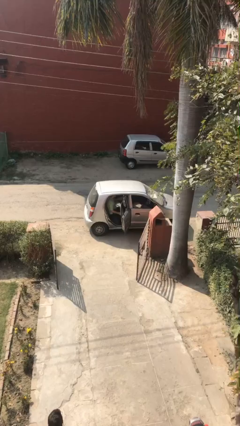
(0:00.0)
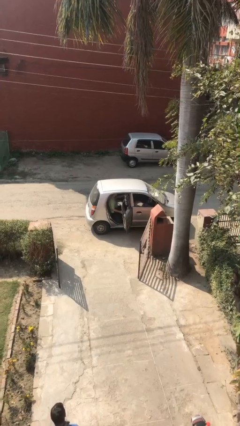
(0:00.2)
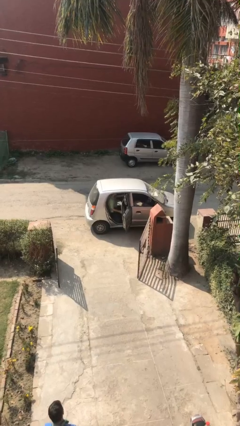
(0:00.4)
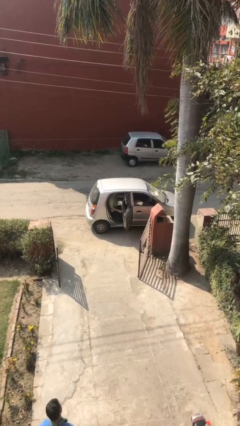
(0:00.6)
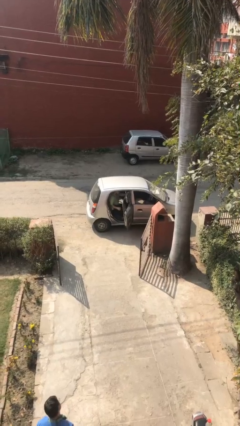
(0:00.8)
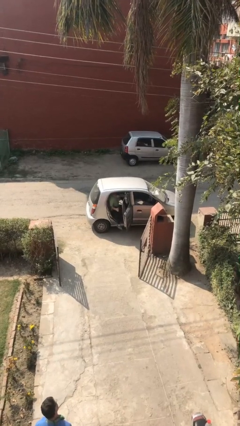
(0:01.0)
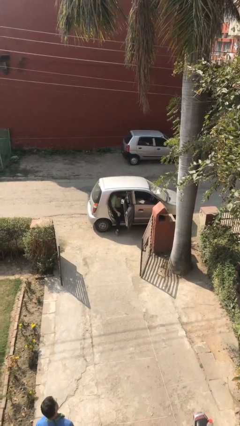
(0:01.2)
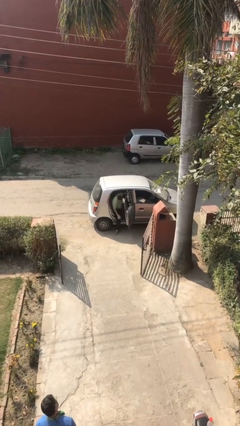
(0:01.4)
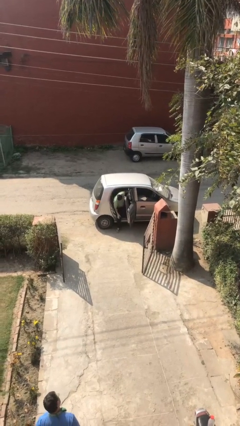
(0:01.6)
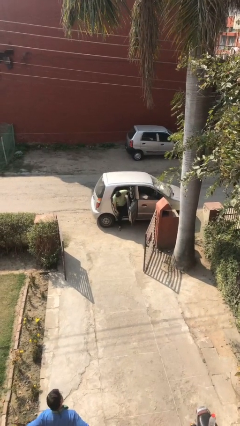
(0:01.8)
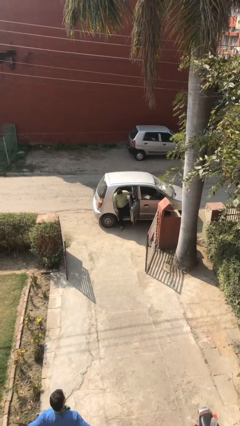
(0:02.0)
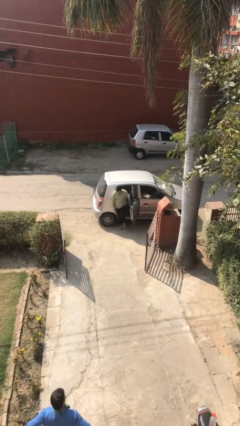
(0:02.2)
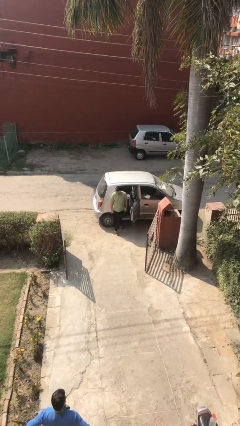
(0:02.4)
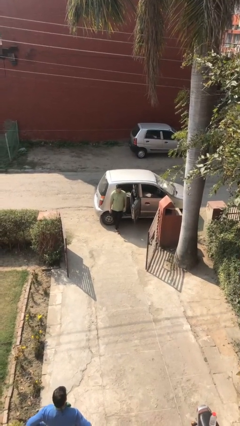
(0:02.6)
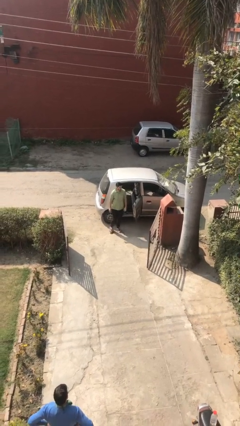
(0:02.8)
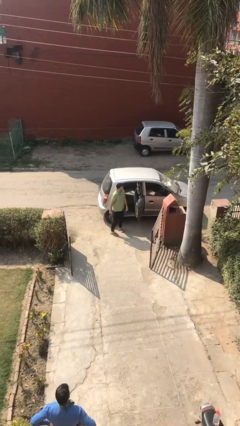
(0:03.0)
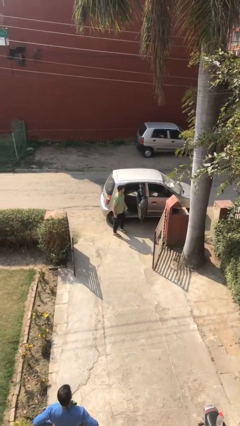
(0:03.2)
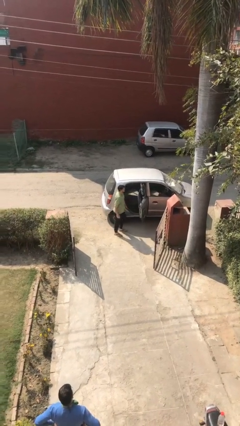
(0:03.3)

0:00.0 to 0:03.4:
person exits car

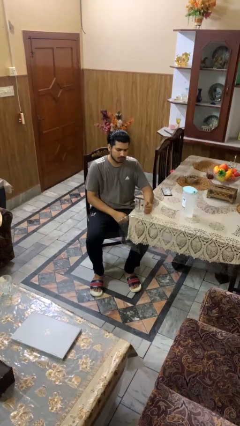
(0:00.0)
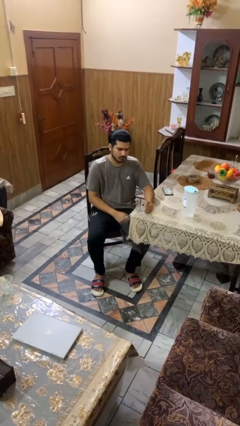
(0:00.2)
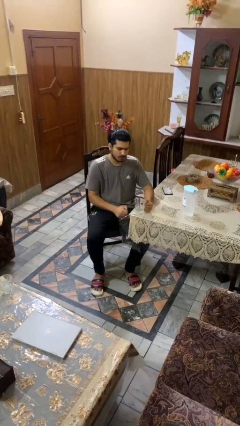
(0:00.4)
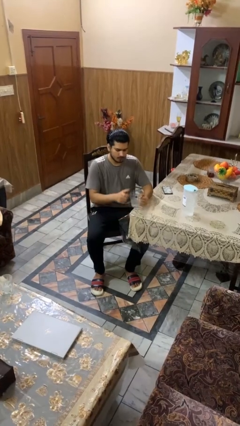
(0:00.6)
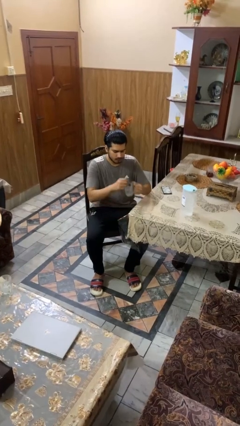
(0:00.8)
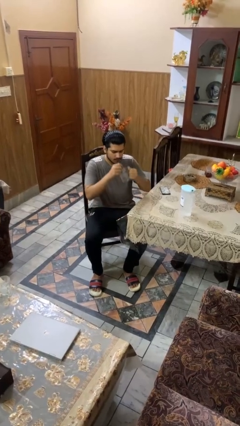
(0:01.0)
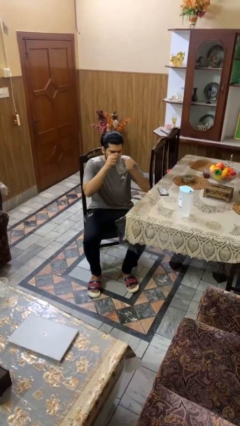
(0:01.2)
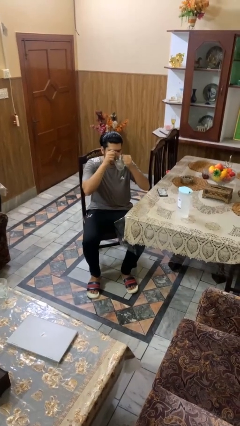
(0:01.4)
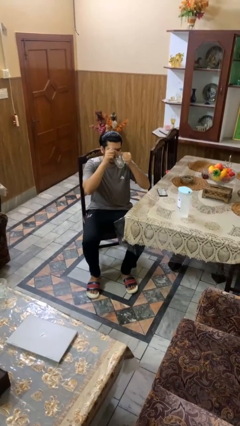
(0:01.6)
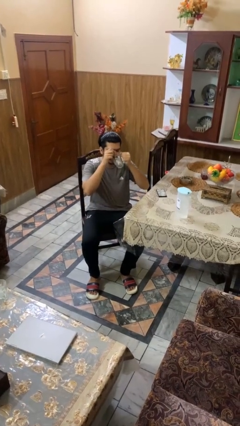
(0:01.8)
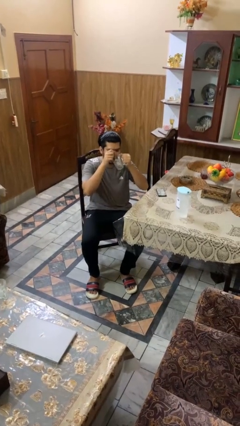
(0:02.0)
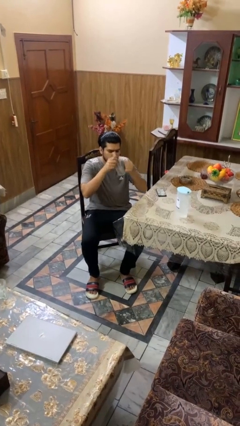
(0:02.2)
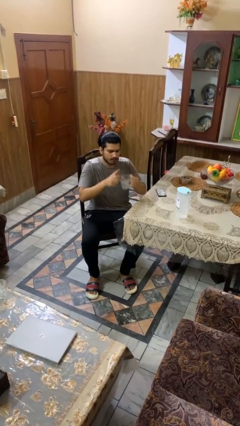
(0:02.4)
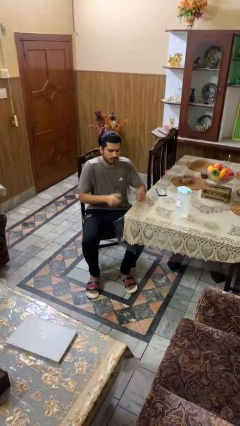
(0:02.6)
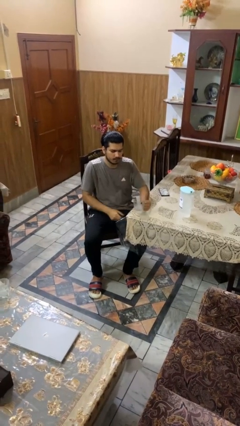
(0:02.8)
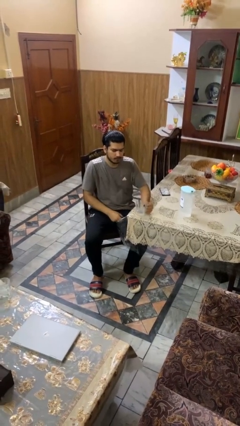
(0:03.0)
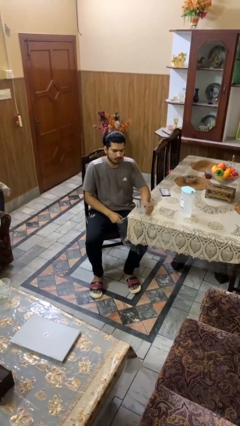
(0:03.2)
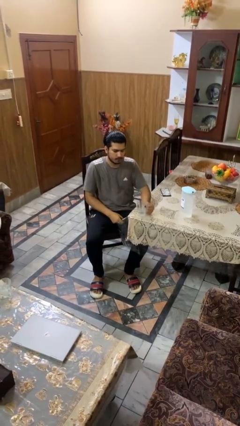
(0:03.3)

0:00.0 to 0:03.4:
person drinks from mug

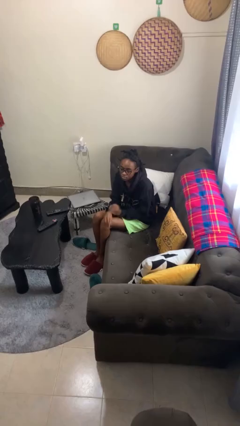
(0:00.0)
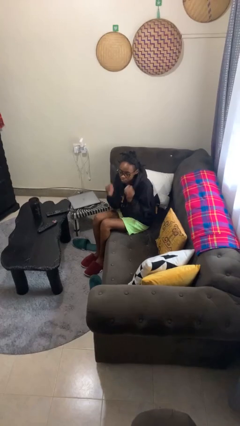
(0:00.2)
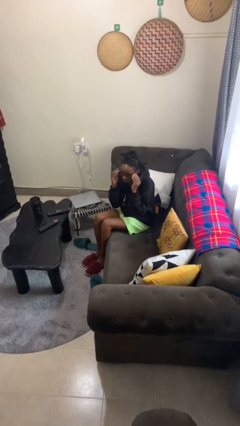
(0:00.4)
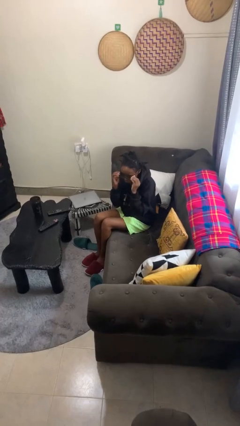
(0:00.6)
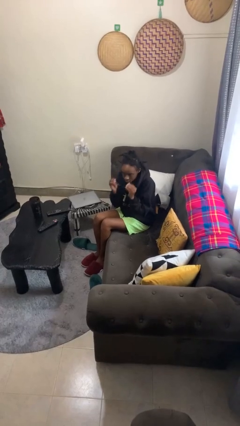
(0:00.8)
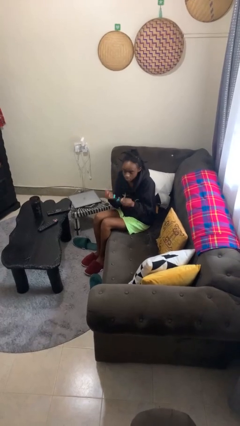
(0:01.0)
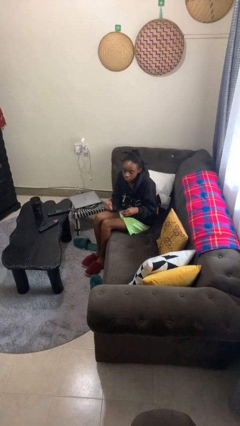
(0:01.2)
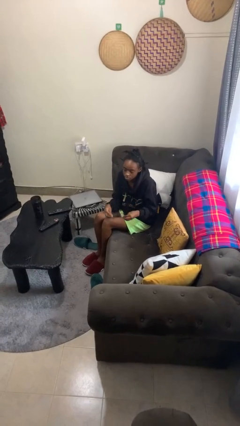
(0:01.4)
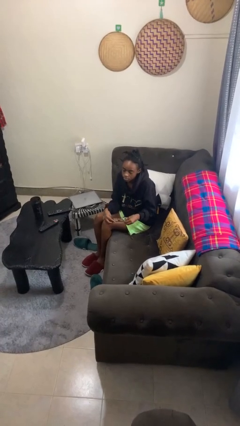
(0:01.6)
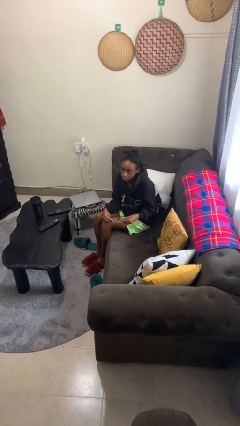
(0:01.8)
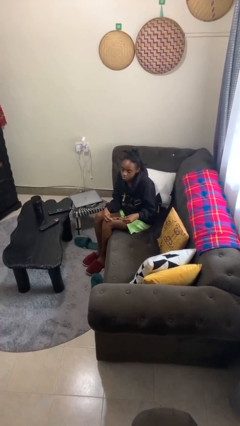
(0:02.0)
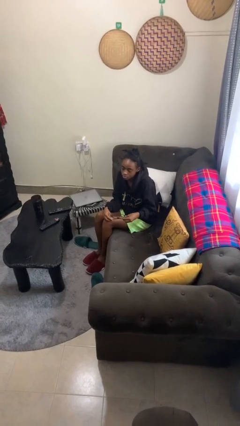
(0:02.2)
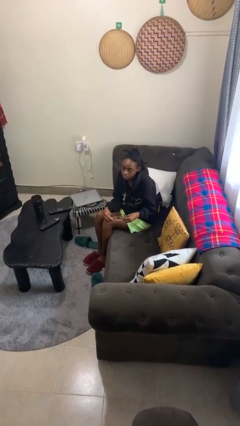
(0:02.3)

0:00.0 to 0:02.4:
person takes off glasses

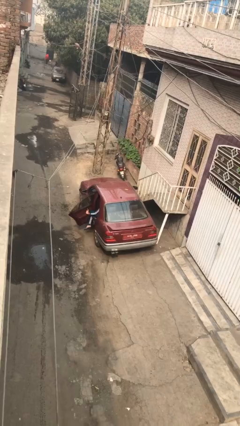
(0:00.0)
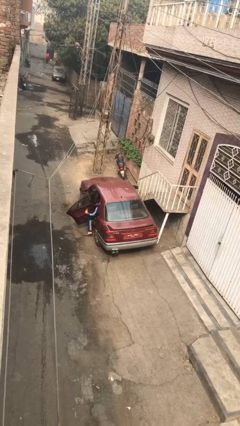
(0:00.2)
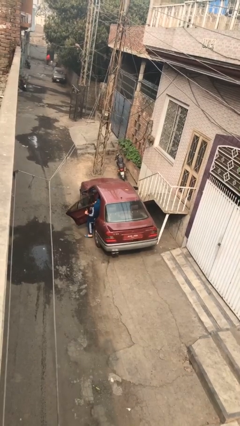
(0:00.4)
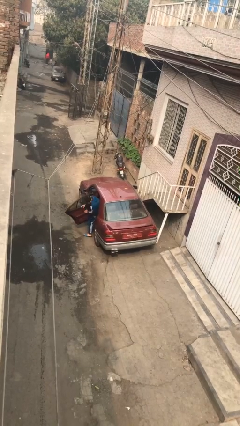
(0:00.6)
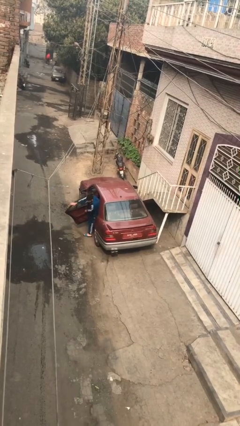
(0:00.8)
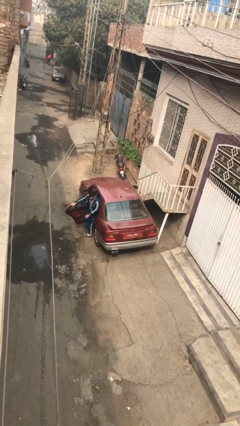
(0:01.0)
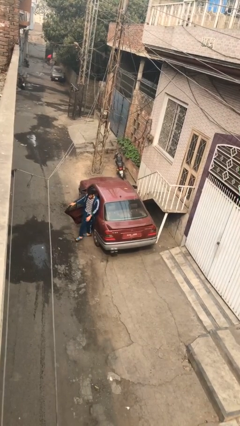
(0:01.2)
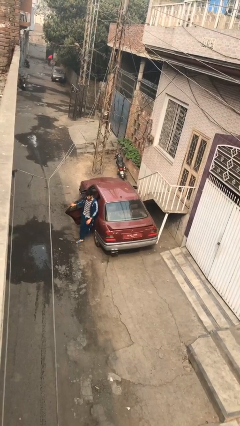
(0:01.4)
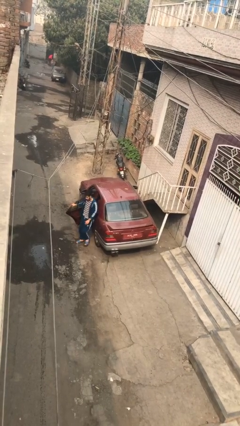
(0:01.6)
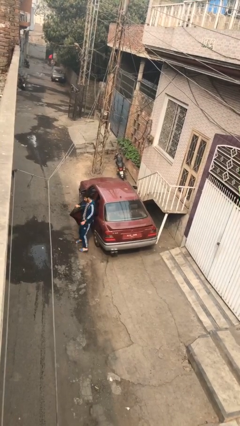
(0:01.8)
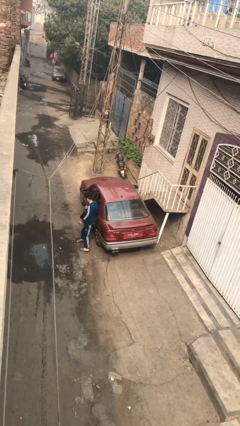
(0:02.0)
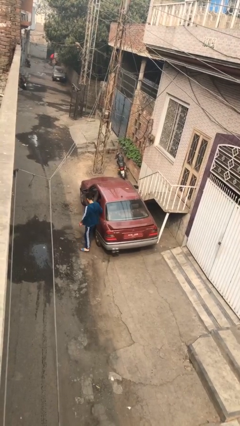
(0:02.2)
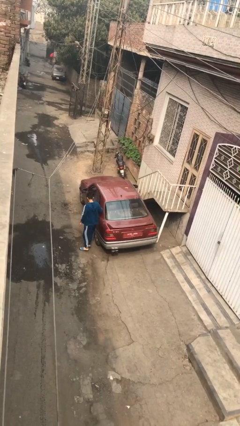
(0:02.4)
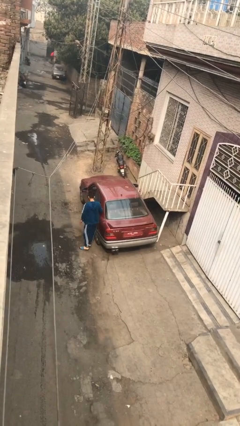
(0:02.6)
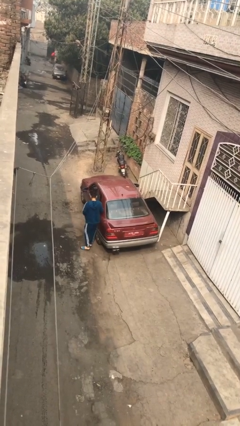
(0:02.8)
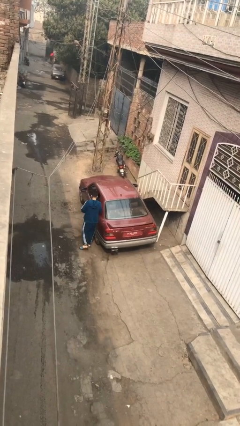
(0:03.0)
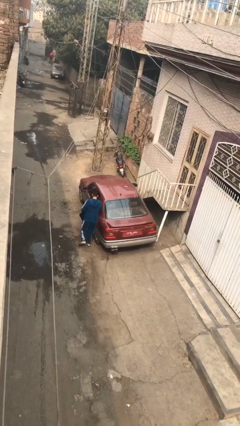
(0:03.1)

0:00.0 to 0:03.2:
car drops off person

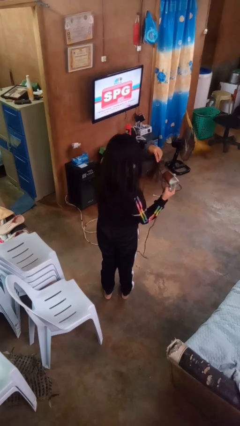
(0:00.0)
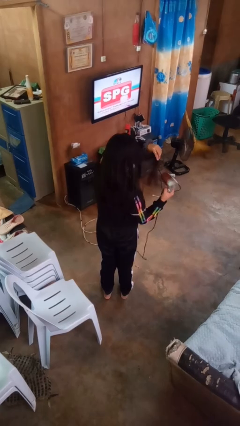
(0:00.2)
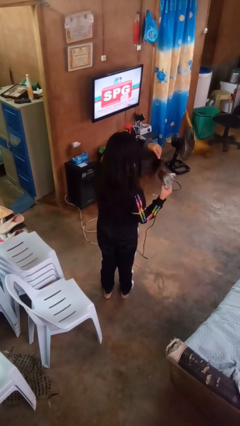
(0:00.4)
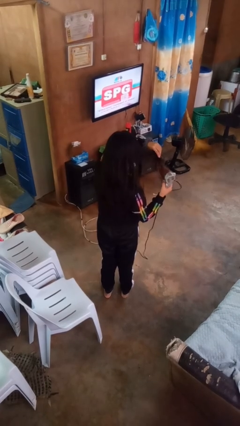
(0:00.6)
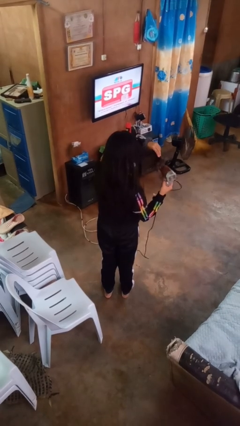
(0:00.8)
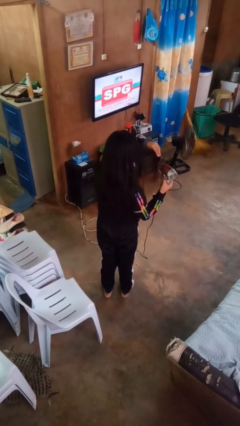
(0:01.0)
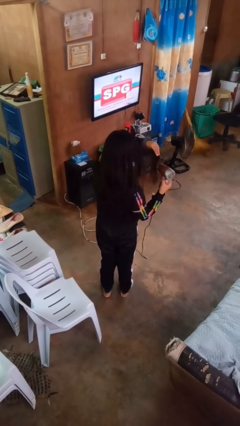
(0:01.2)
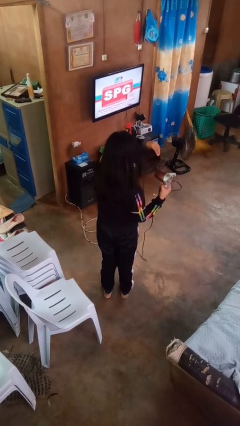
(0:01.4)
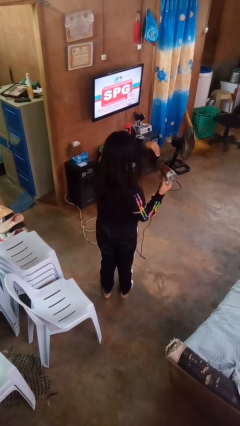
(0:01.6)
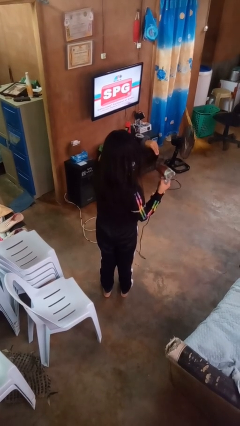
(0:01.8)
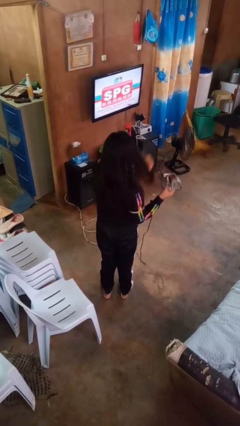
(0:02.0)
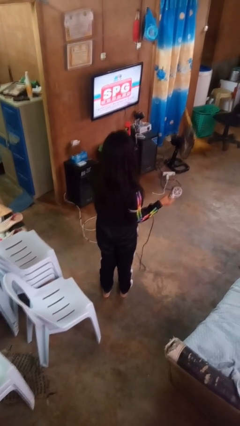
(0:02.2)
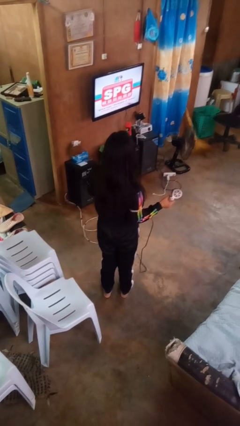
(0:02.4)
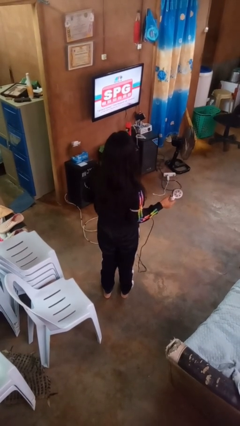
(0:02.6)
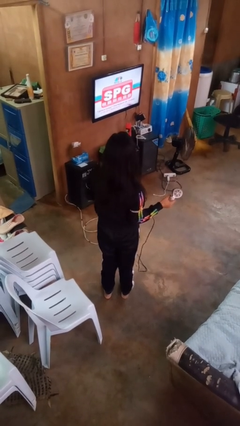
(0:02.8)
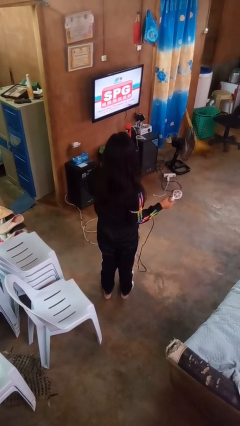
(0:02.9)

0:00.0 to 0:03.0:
person dries hair with hairdryer

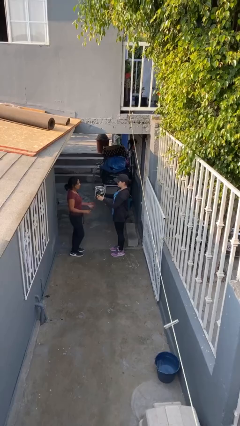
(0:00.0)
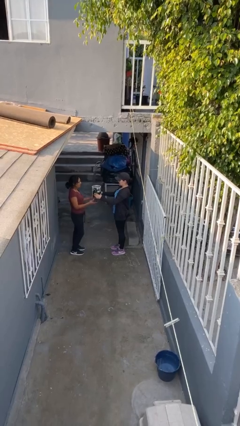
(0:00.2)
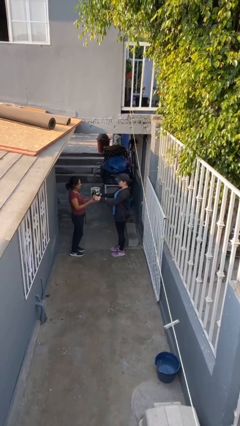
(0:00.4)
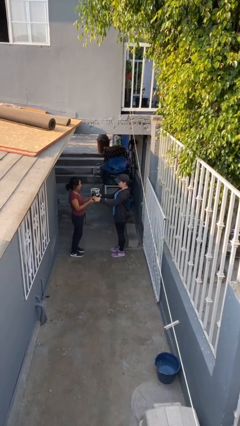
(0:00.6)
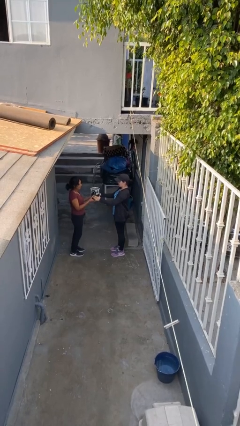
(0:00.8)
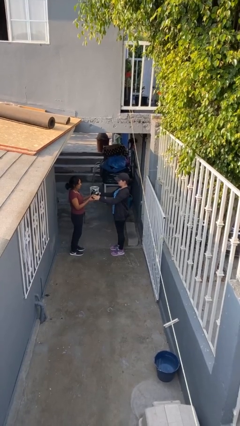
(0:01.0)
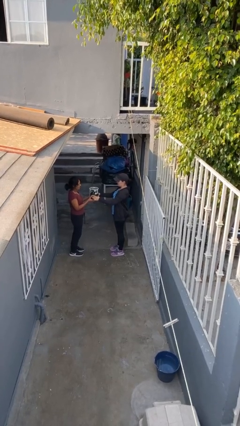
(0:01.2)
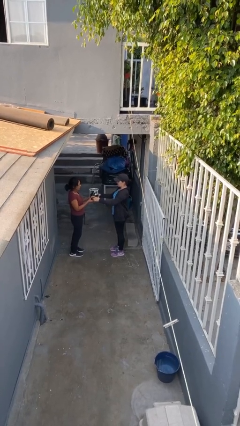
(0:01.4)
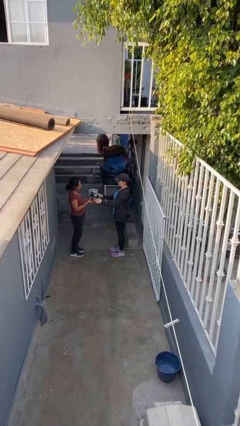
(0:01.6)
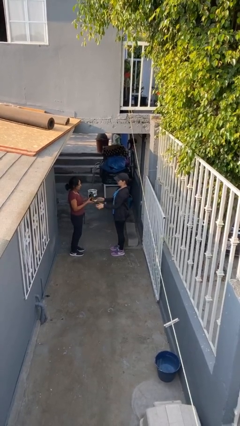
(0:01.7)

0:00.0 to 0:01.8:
person transfers object to person

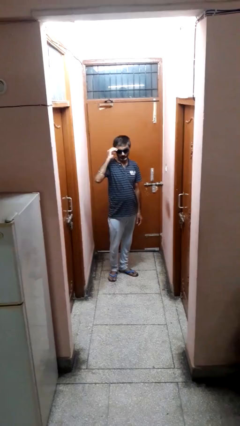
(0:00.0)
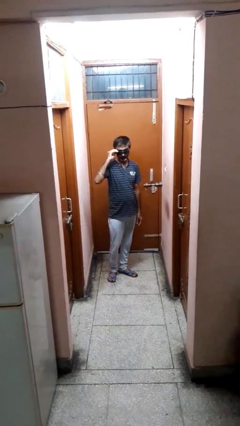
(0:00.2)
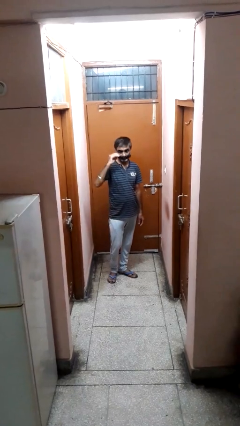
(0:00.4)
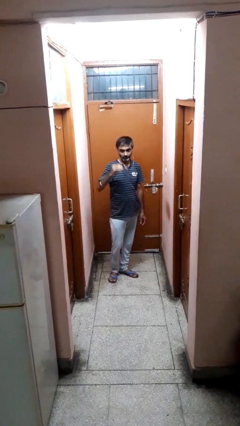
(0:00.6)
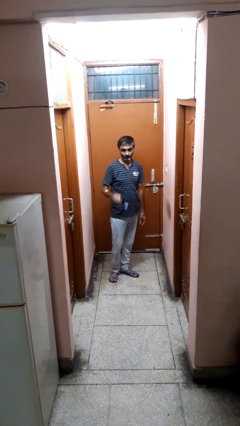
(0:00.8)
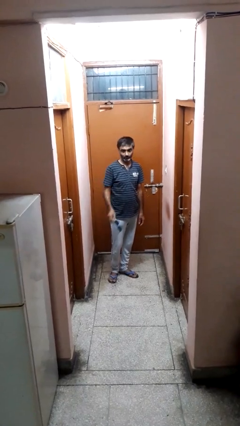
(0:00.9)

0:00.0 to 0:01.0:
person takes off sunglasses
